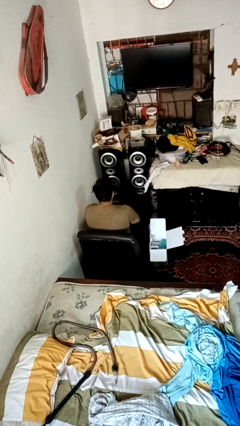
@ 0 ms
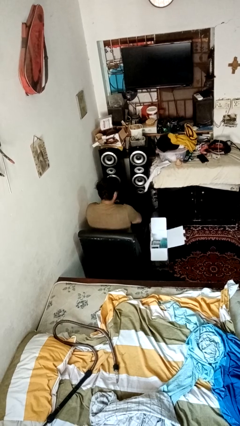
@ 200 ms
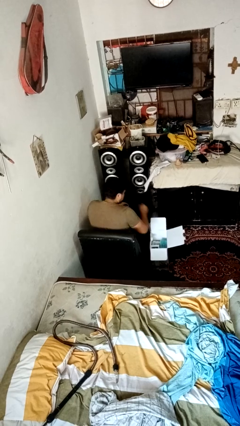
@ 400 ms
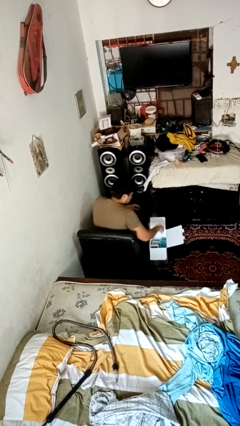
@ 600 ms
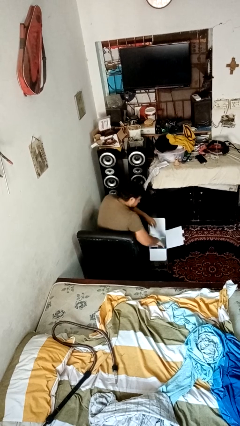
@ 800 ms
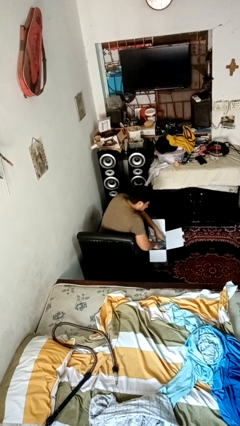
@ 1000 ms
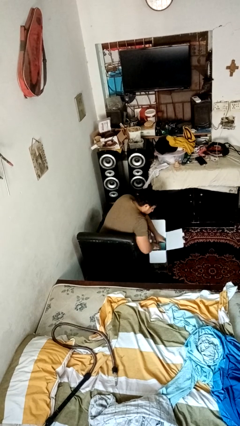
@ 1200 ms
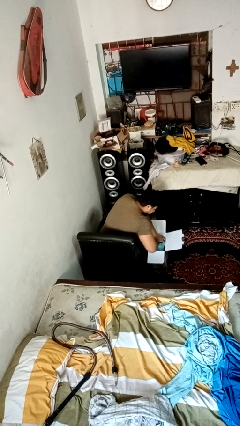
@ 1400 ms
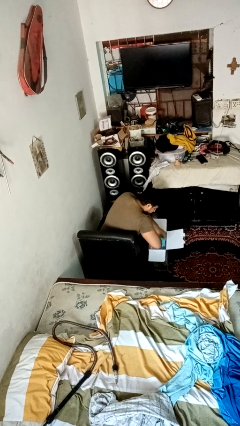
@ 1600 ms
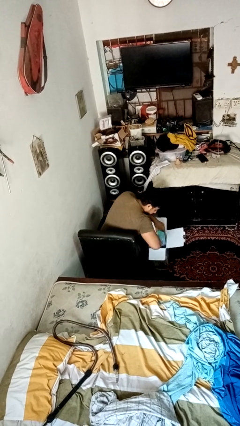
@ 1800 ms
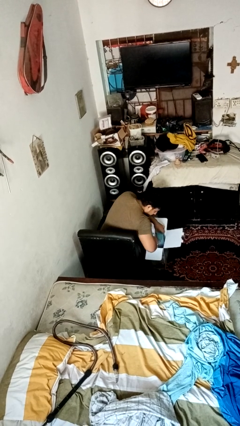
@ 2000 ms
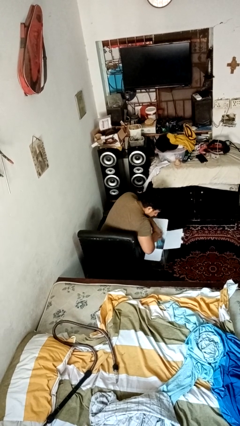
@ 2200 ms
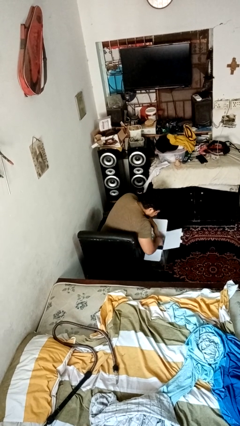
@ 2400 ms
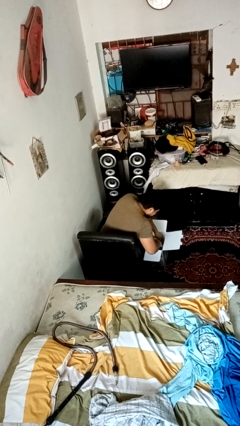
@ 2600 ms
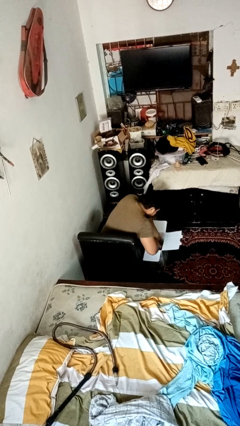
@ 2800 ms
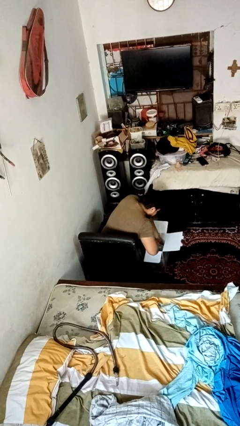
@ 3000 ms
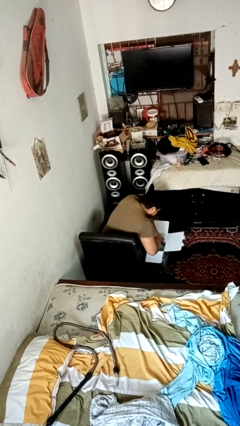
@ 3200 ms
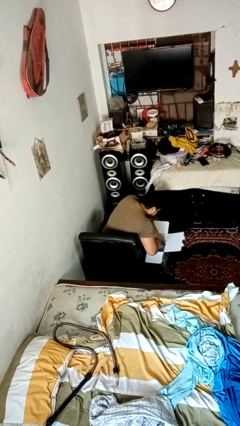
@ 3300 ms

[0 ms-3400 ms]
person searches in box

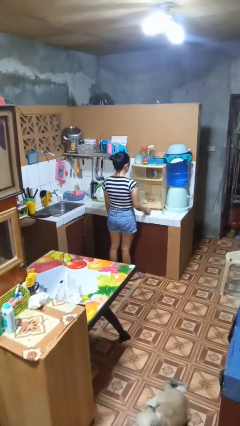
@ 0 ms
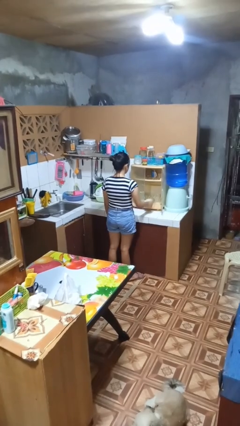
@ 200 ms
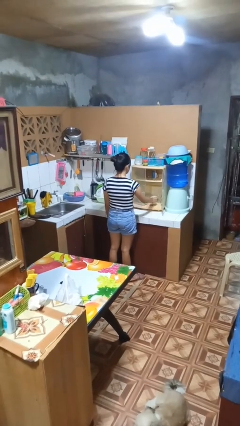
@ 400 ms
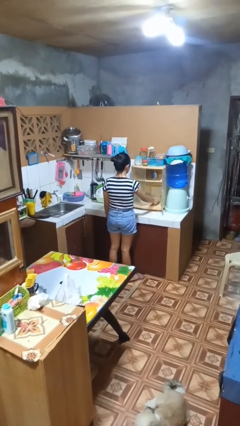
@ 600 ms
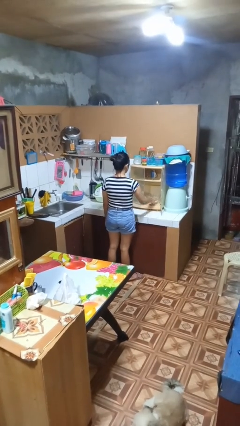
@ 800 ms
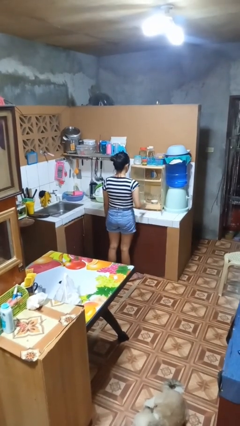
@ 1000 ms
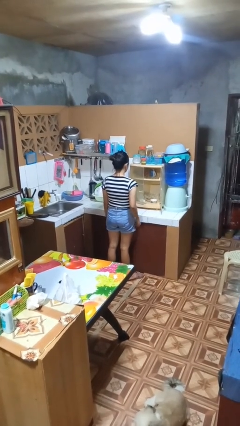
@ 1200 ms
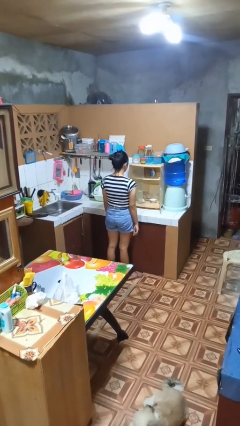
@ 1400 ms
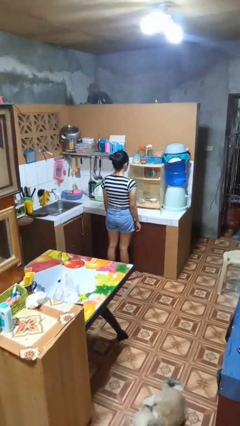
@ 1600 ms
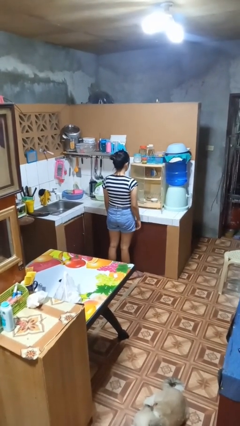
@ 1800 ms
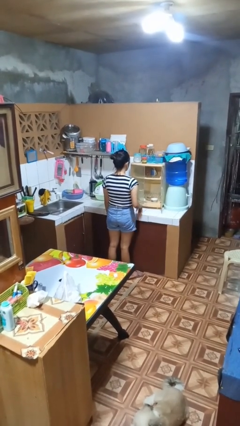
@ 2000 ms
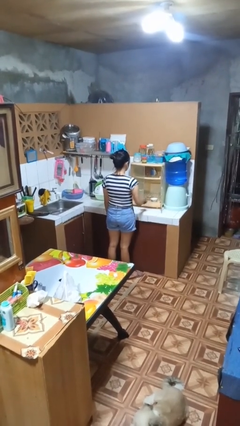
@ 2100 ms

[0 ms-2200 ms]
person puts object in cabinet

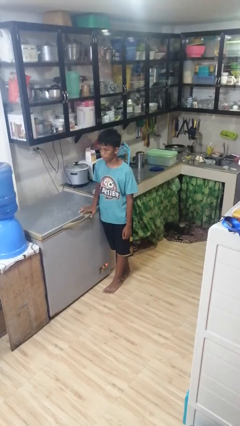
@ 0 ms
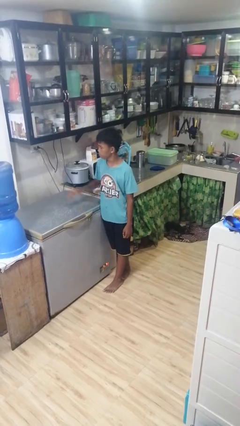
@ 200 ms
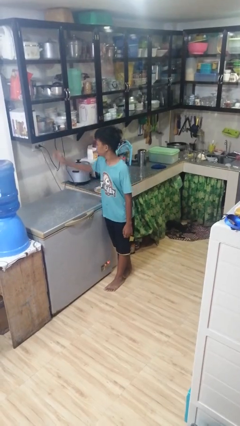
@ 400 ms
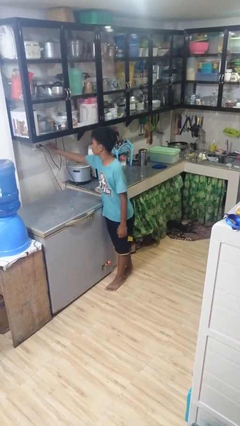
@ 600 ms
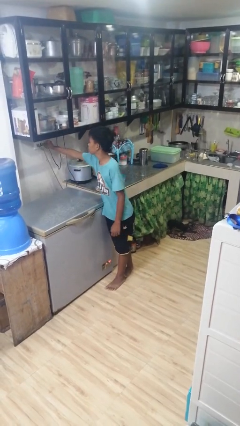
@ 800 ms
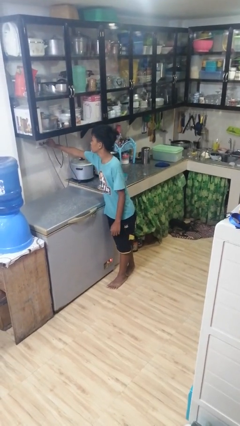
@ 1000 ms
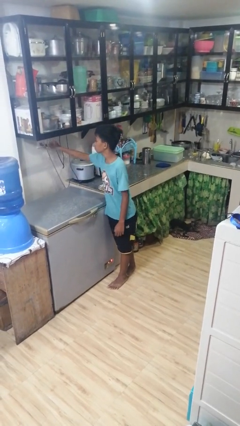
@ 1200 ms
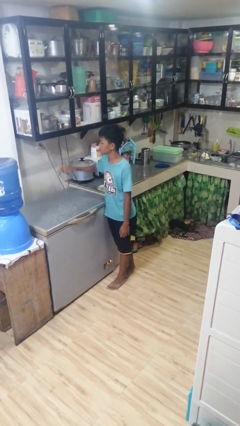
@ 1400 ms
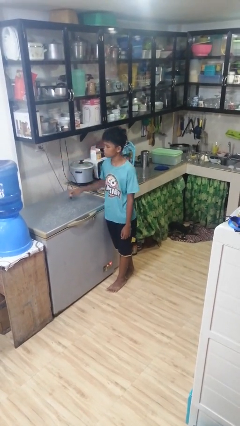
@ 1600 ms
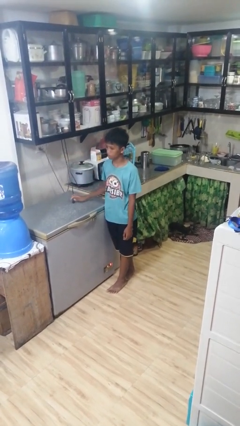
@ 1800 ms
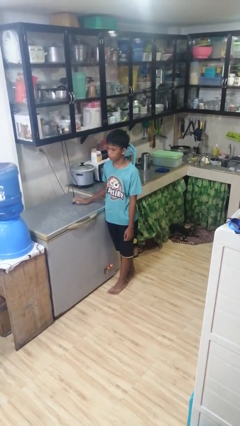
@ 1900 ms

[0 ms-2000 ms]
person unplugs from electrical socket

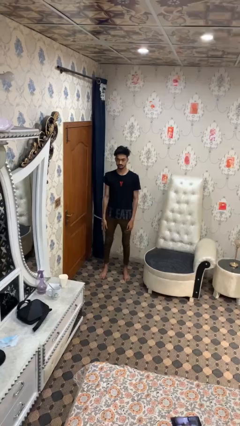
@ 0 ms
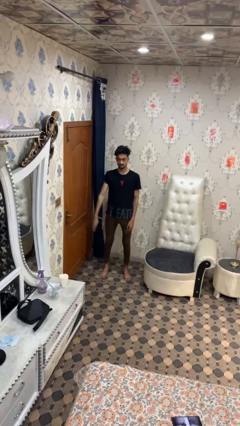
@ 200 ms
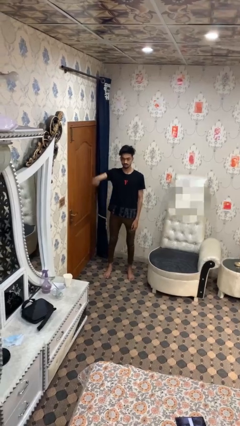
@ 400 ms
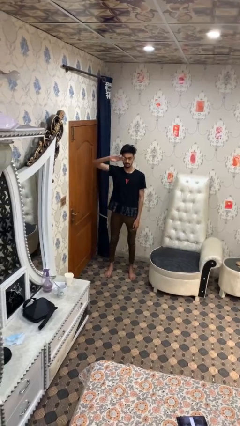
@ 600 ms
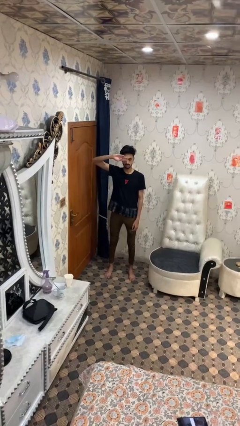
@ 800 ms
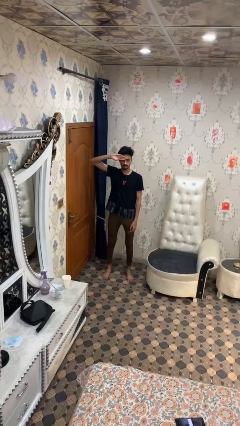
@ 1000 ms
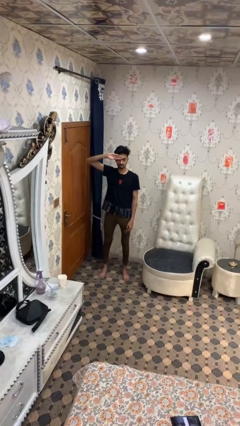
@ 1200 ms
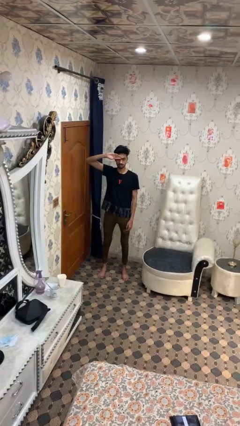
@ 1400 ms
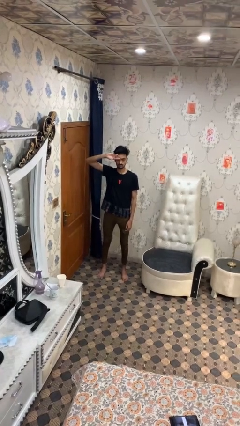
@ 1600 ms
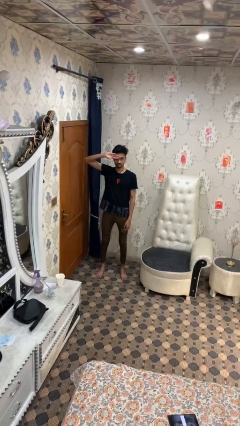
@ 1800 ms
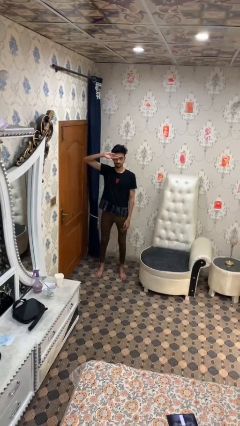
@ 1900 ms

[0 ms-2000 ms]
person salutes

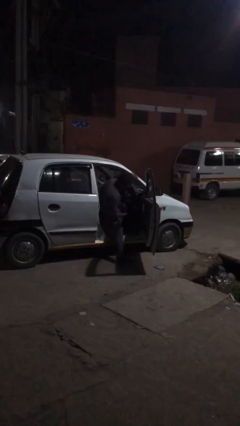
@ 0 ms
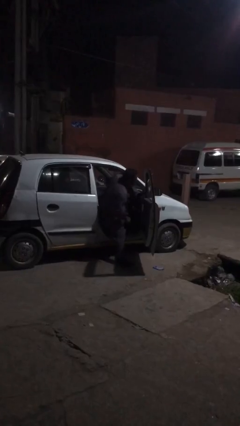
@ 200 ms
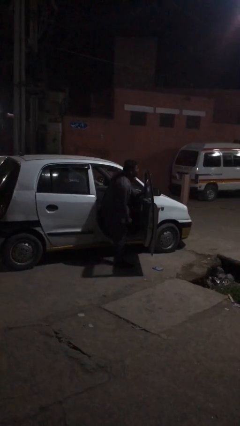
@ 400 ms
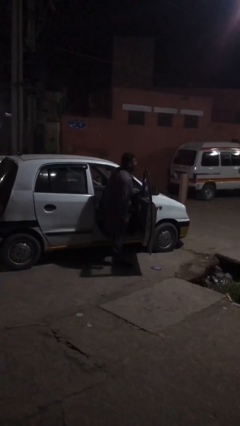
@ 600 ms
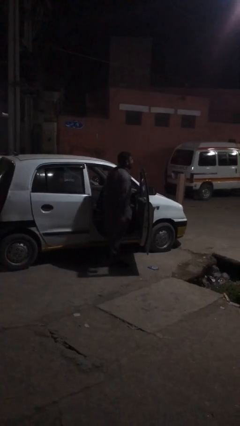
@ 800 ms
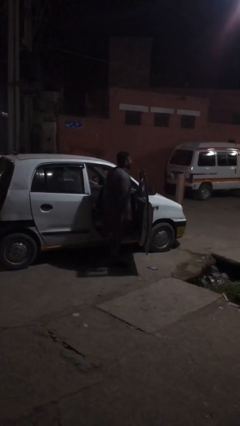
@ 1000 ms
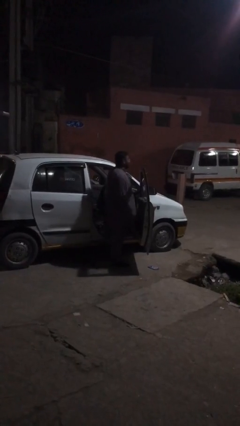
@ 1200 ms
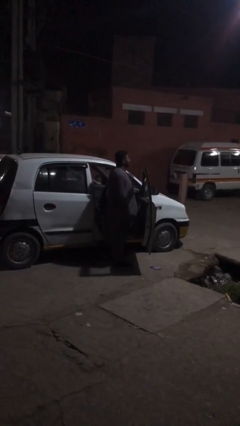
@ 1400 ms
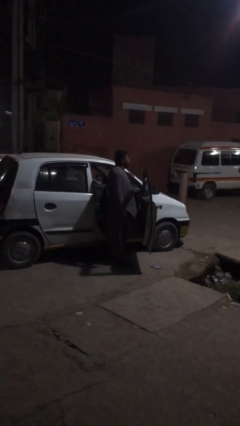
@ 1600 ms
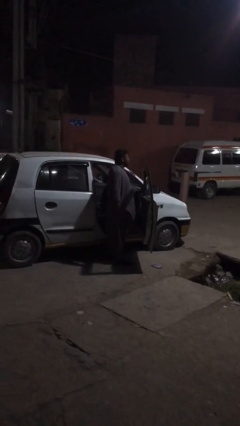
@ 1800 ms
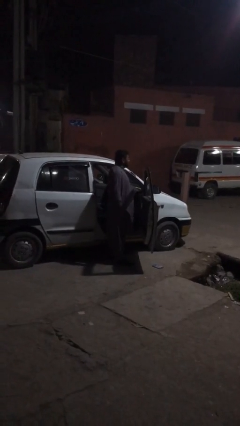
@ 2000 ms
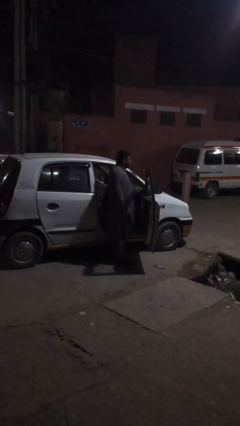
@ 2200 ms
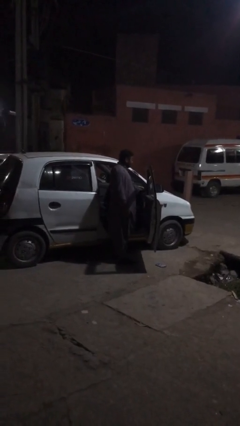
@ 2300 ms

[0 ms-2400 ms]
person exits car

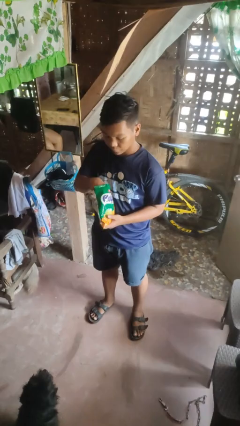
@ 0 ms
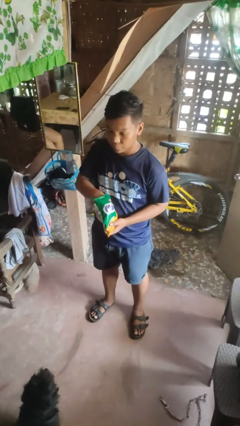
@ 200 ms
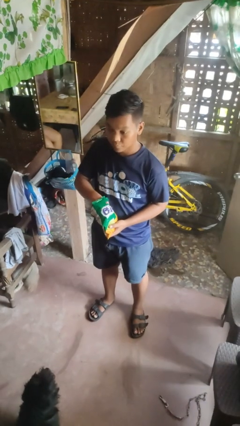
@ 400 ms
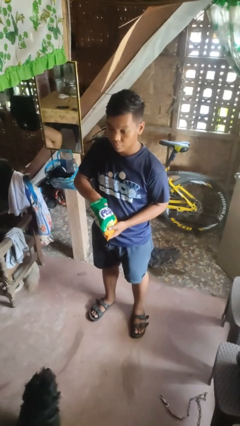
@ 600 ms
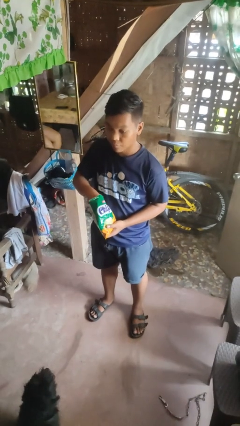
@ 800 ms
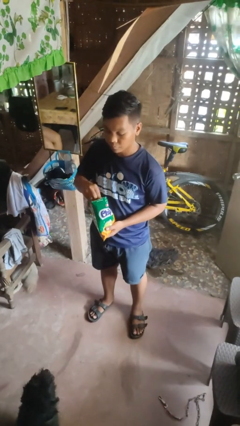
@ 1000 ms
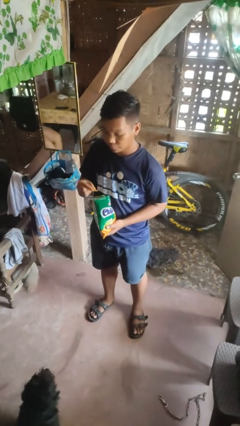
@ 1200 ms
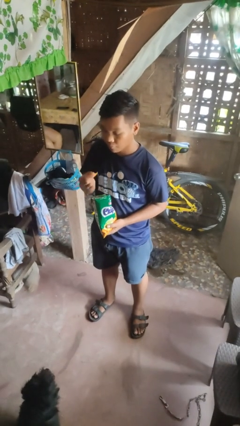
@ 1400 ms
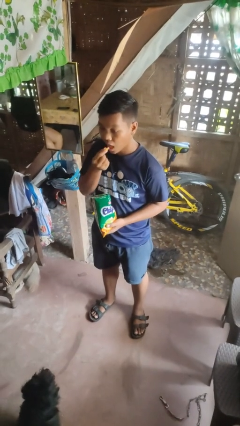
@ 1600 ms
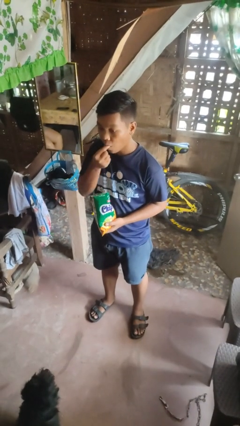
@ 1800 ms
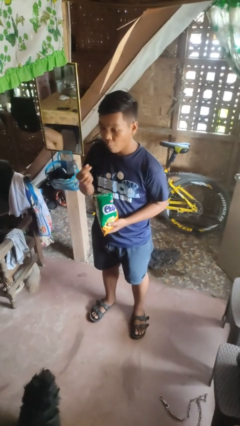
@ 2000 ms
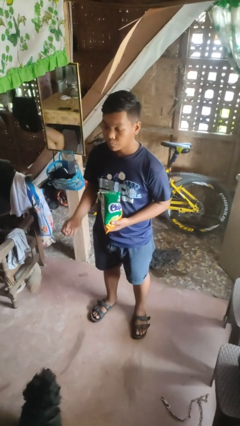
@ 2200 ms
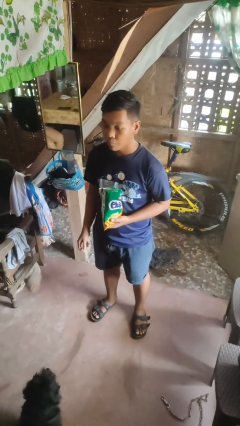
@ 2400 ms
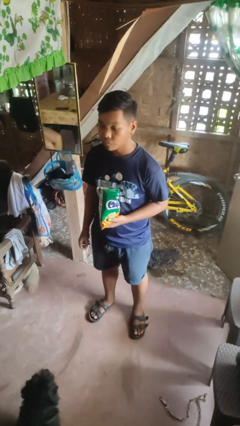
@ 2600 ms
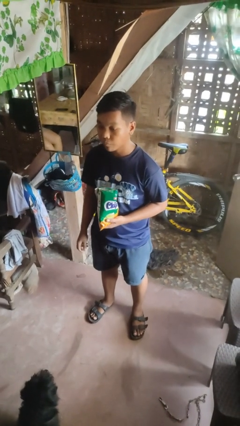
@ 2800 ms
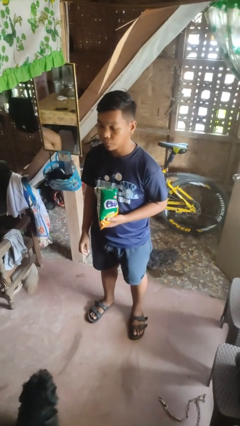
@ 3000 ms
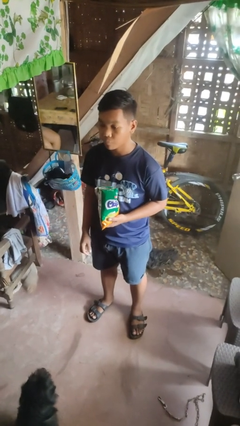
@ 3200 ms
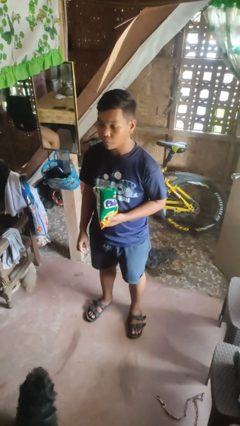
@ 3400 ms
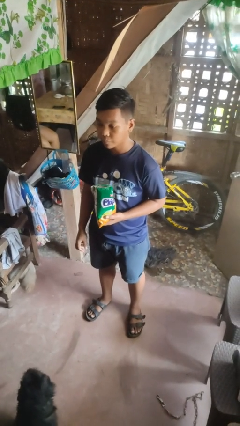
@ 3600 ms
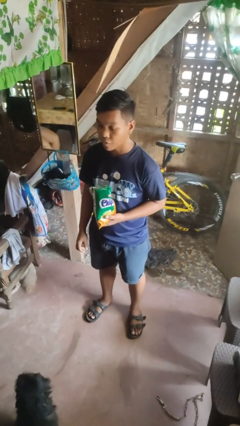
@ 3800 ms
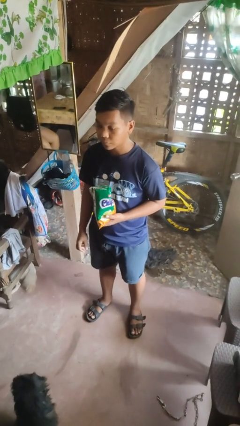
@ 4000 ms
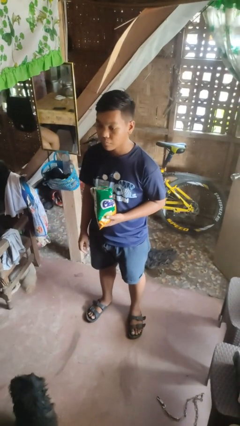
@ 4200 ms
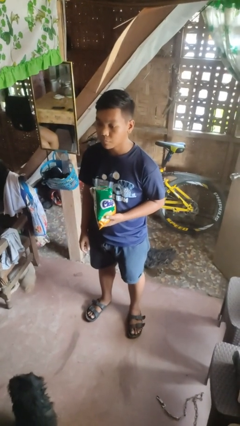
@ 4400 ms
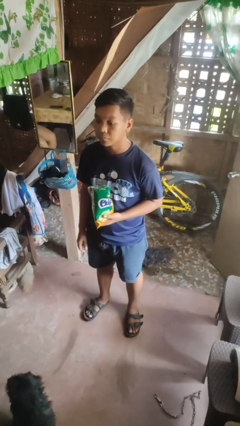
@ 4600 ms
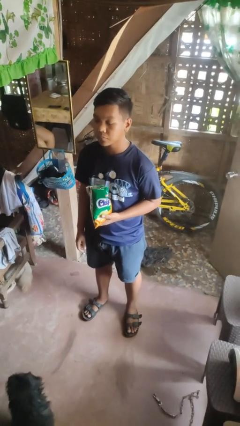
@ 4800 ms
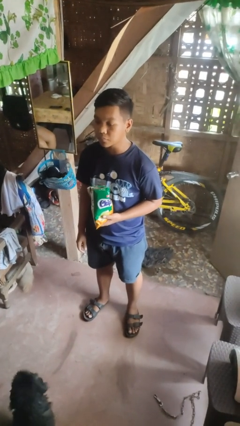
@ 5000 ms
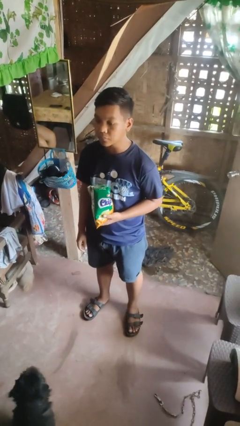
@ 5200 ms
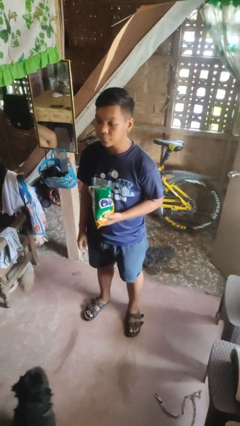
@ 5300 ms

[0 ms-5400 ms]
person eats snack from bag
